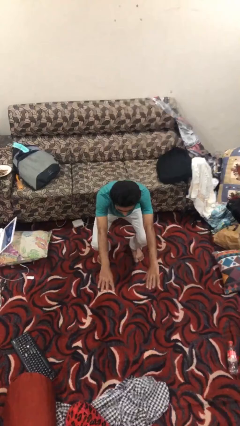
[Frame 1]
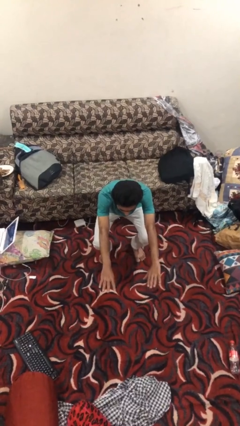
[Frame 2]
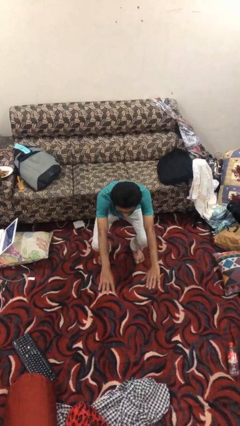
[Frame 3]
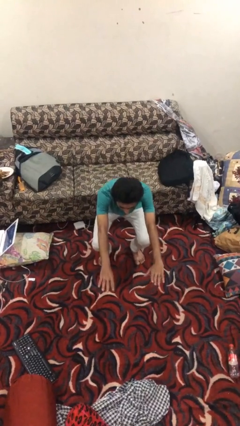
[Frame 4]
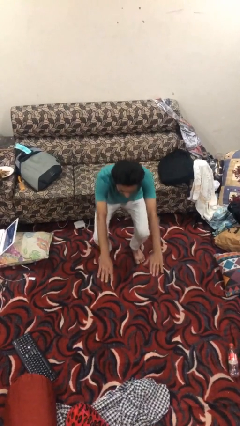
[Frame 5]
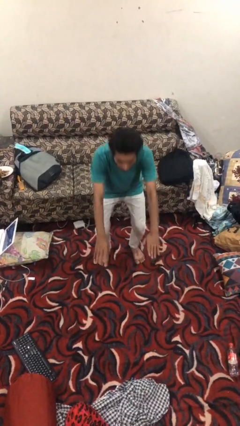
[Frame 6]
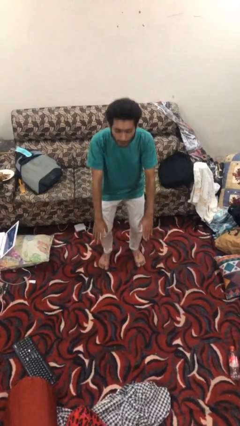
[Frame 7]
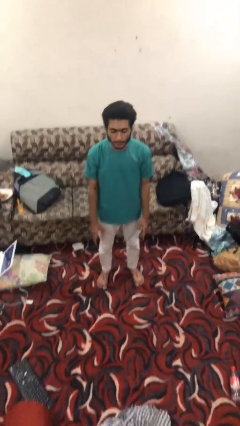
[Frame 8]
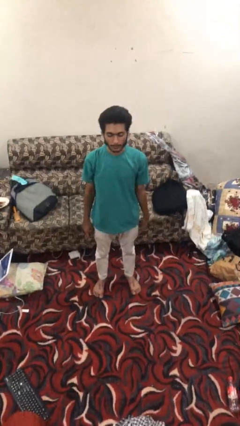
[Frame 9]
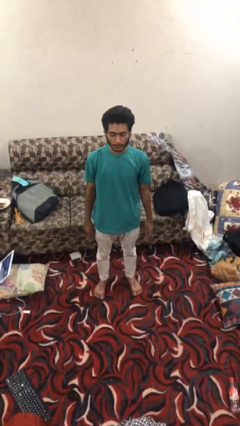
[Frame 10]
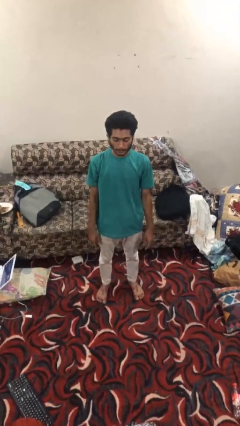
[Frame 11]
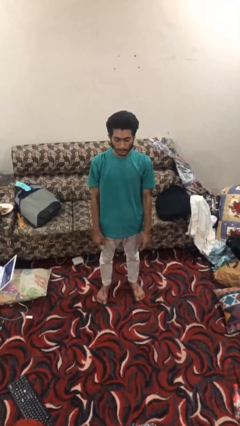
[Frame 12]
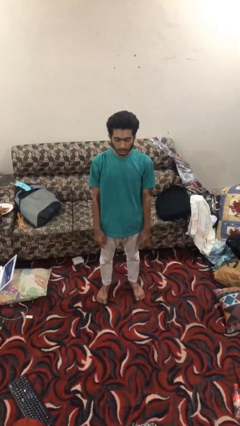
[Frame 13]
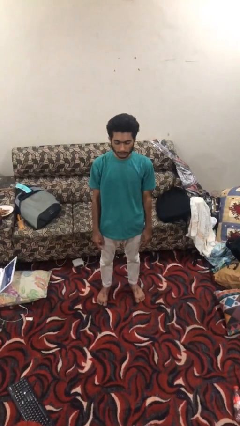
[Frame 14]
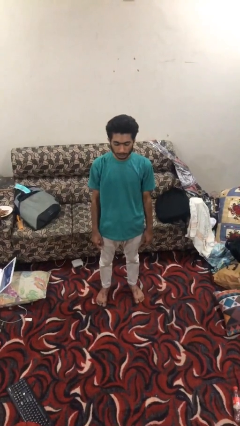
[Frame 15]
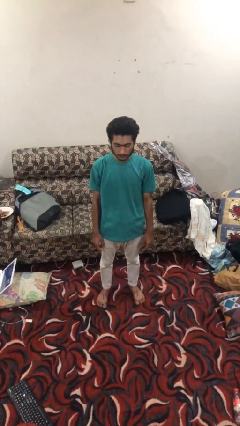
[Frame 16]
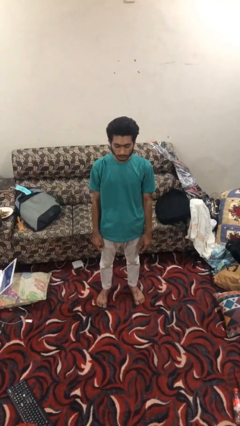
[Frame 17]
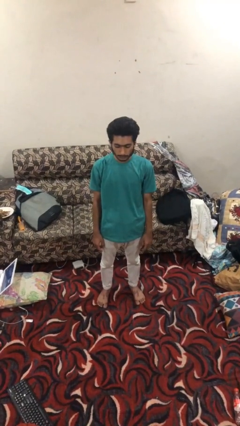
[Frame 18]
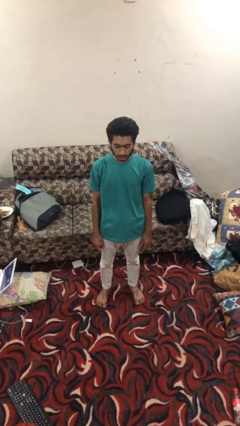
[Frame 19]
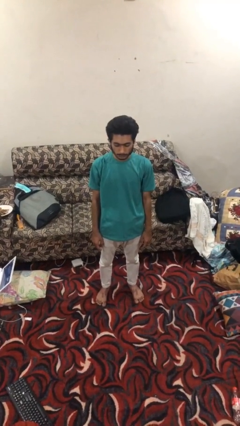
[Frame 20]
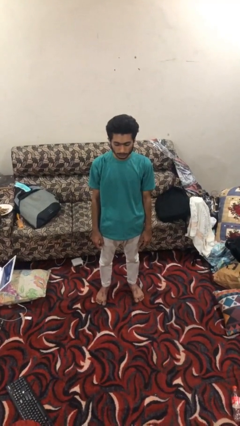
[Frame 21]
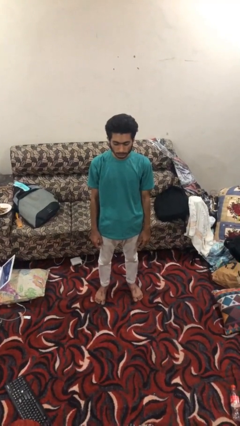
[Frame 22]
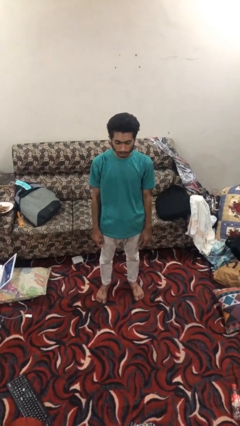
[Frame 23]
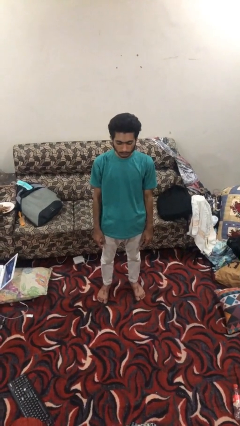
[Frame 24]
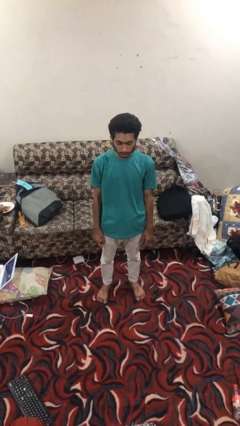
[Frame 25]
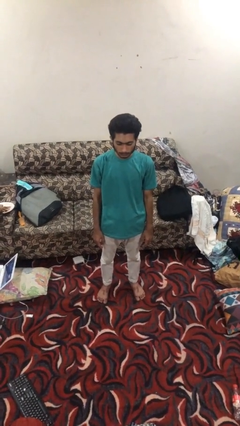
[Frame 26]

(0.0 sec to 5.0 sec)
person stands up

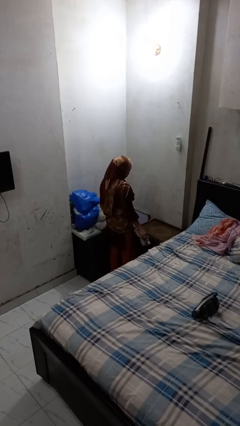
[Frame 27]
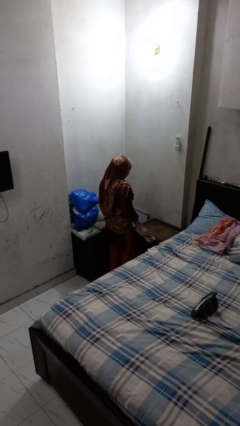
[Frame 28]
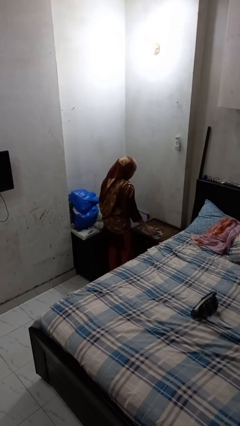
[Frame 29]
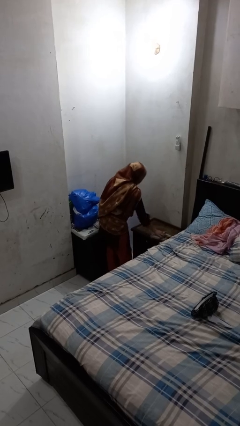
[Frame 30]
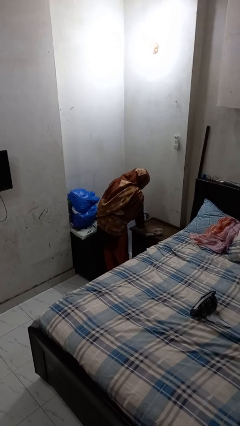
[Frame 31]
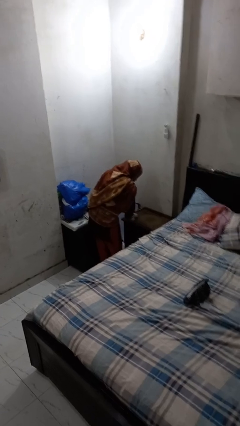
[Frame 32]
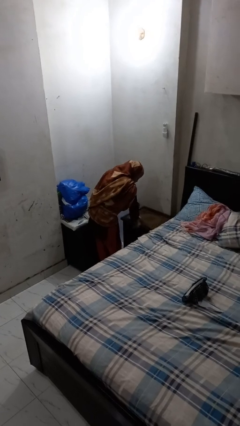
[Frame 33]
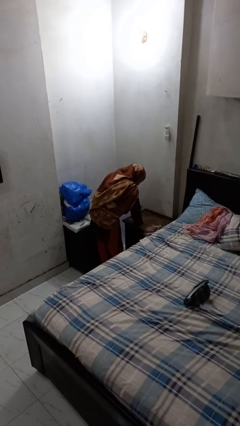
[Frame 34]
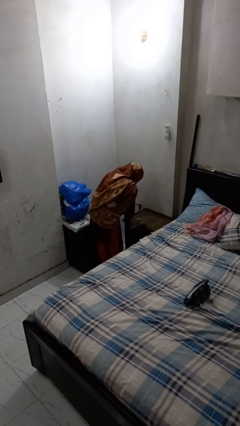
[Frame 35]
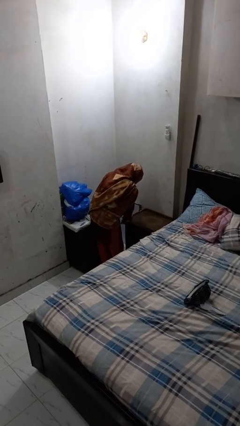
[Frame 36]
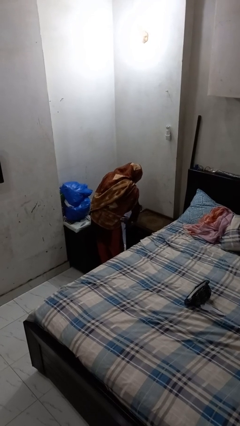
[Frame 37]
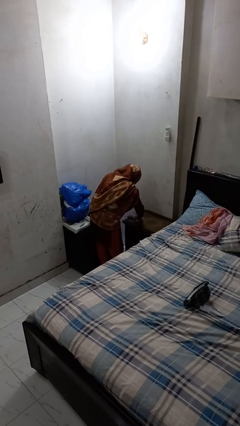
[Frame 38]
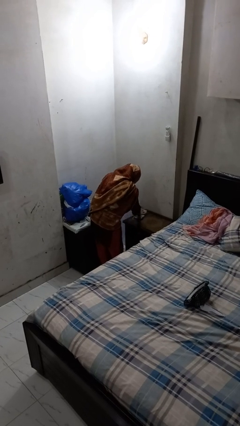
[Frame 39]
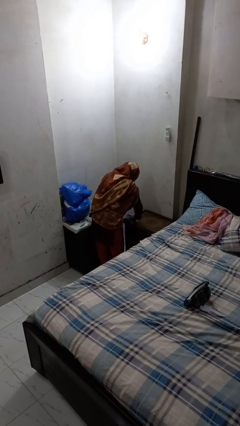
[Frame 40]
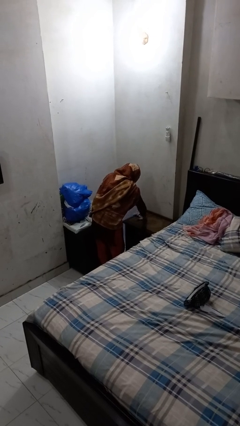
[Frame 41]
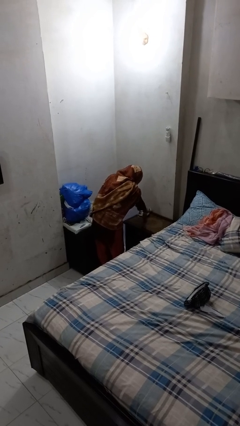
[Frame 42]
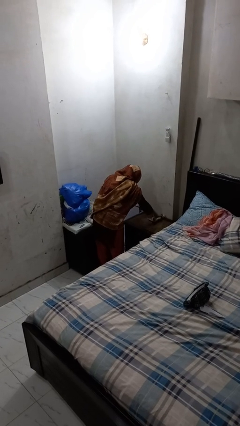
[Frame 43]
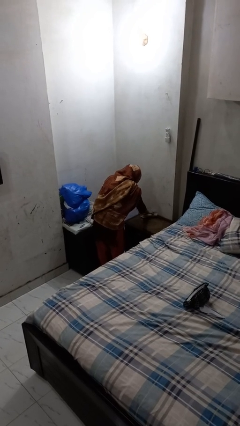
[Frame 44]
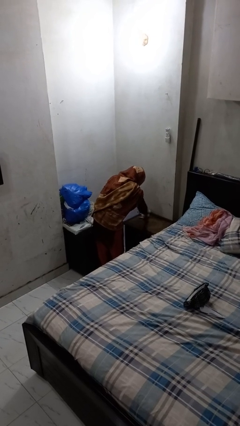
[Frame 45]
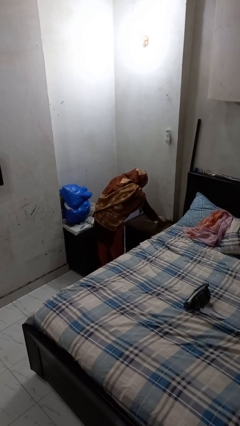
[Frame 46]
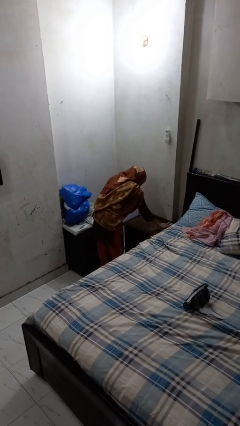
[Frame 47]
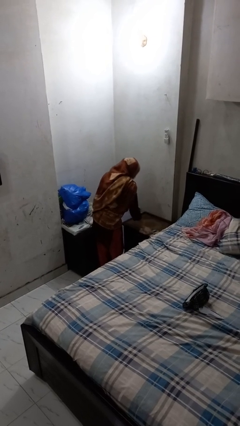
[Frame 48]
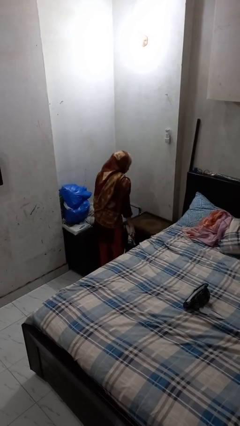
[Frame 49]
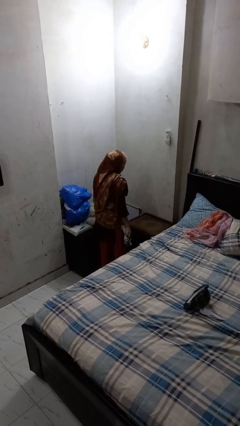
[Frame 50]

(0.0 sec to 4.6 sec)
person cleans table with rag

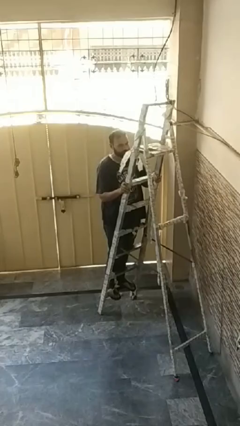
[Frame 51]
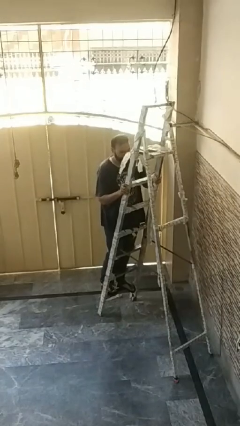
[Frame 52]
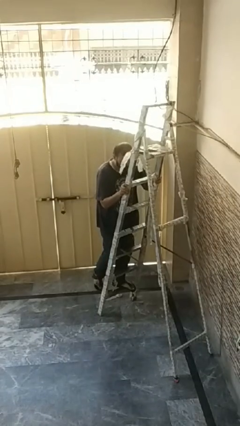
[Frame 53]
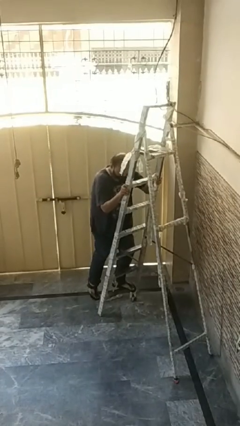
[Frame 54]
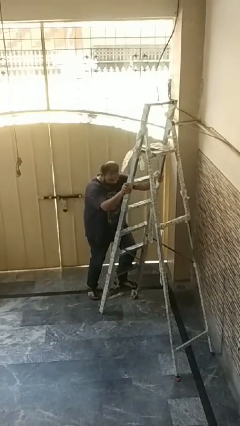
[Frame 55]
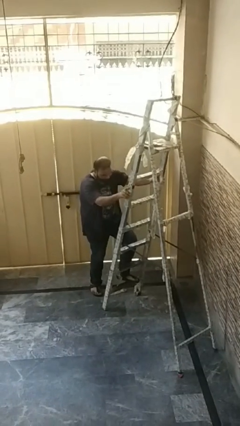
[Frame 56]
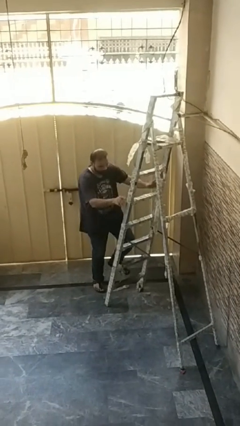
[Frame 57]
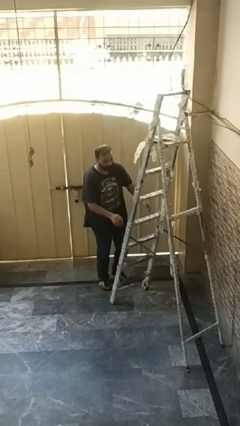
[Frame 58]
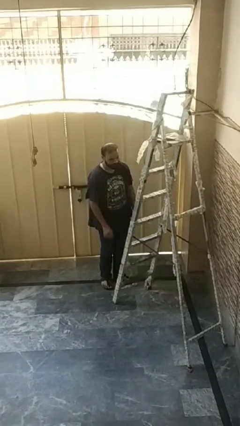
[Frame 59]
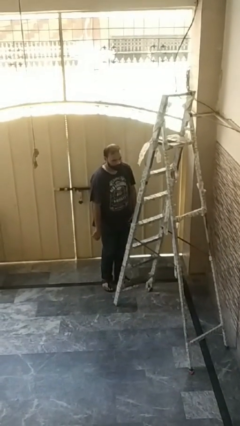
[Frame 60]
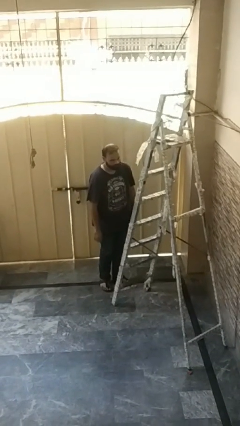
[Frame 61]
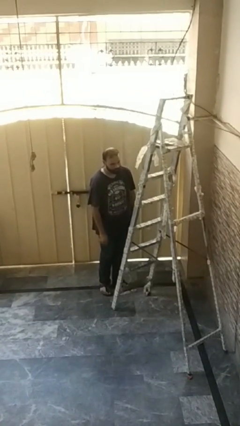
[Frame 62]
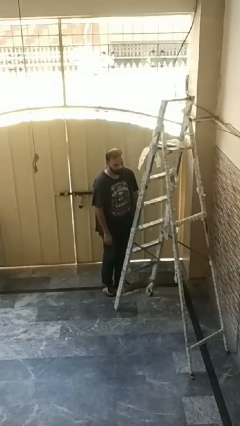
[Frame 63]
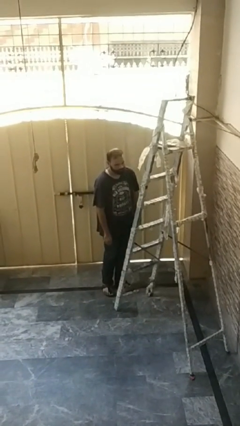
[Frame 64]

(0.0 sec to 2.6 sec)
person climbs down ladder

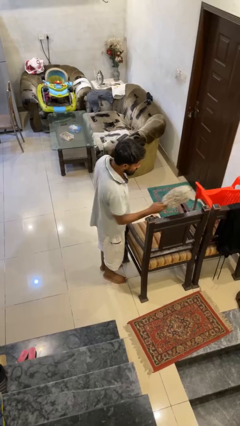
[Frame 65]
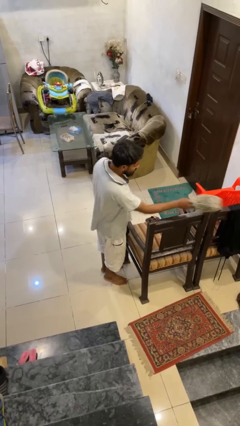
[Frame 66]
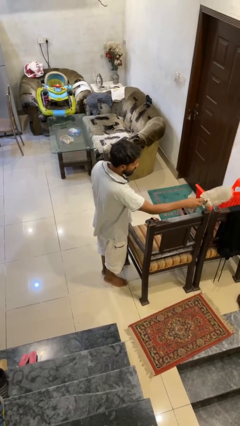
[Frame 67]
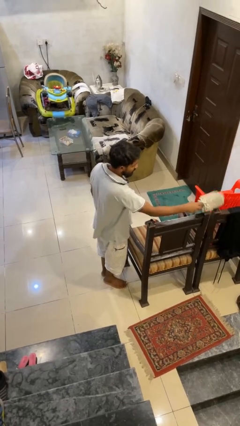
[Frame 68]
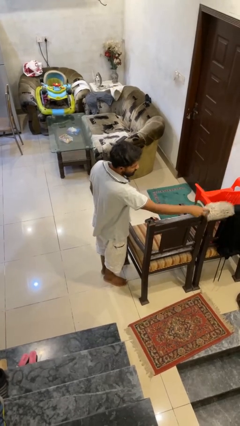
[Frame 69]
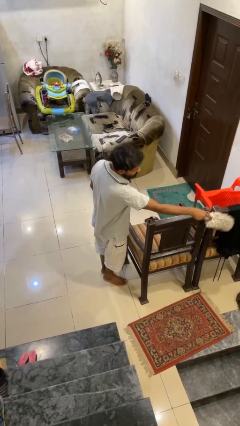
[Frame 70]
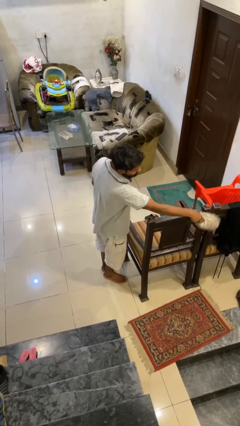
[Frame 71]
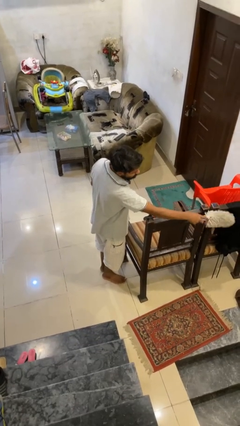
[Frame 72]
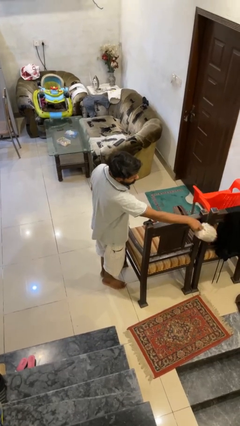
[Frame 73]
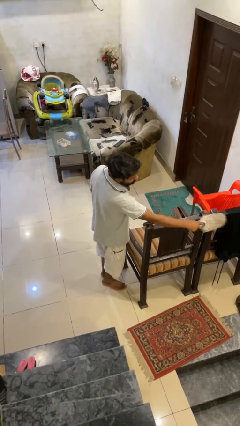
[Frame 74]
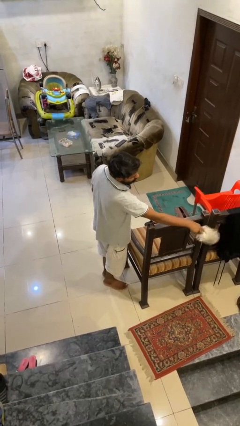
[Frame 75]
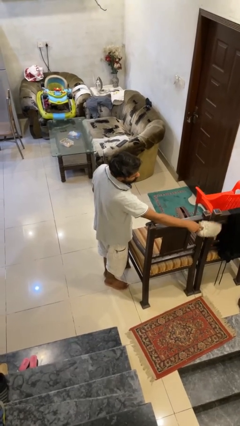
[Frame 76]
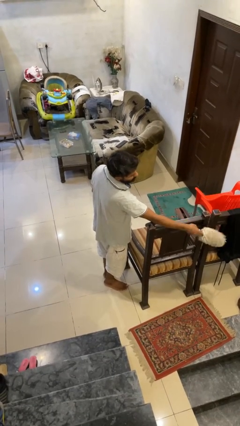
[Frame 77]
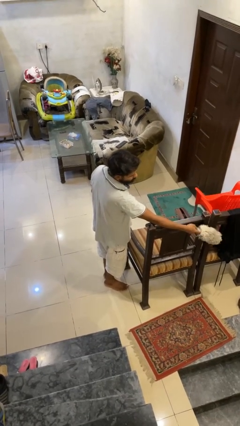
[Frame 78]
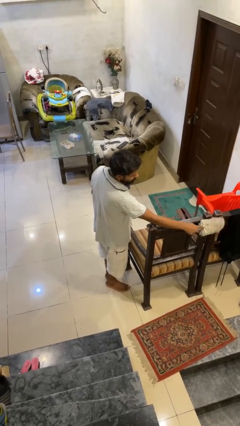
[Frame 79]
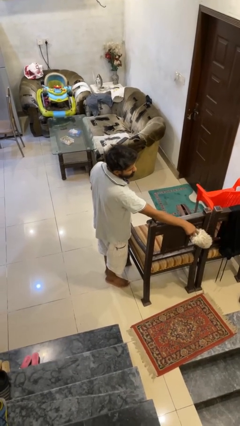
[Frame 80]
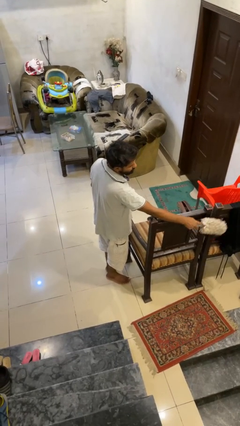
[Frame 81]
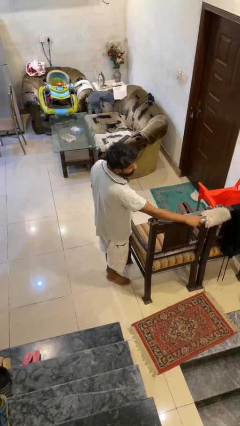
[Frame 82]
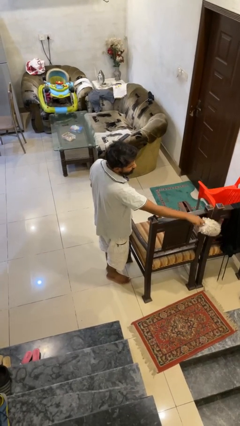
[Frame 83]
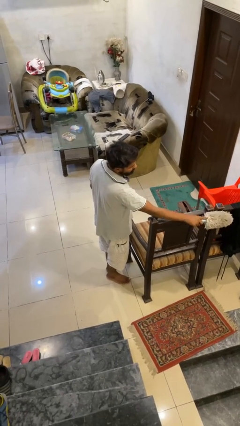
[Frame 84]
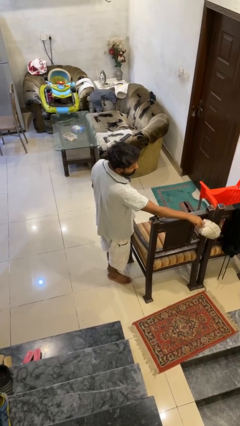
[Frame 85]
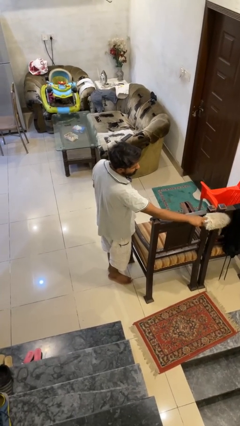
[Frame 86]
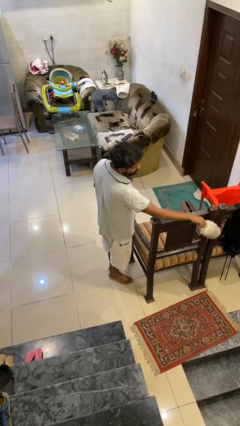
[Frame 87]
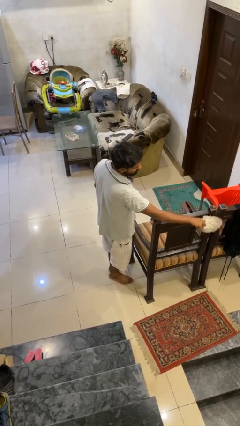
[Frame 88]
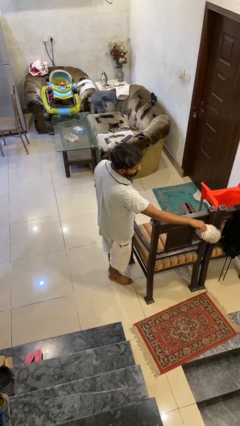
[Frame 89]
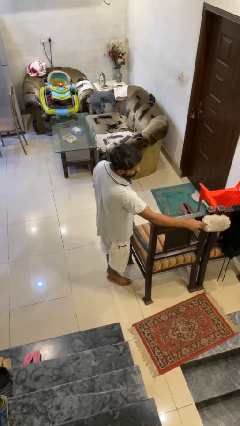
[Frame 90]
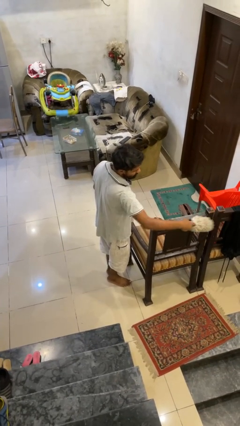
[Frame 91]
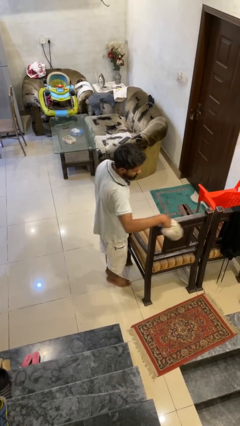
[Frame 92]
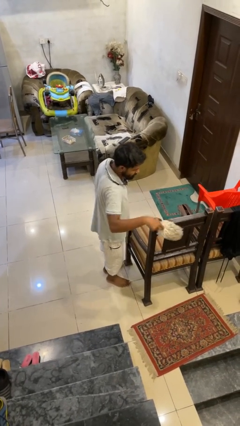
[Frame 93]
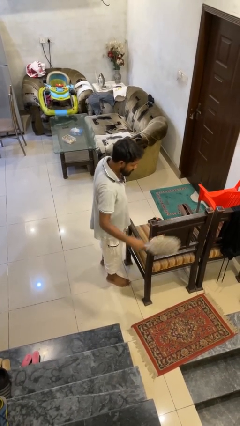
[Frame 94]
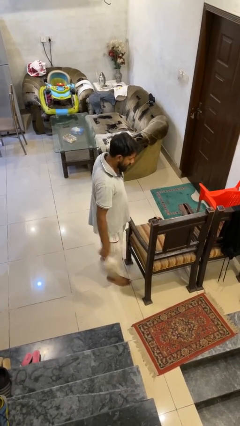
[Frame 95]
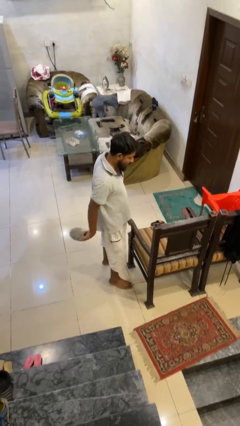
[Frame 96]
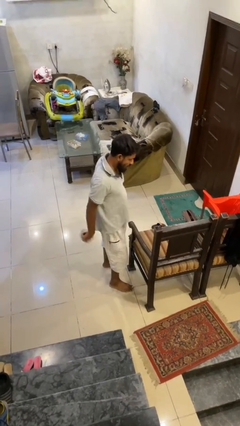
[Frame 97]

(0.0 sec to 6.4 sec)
person dusts furniture
